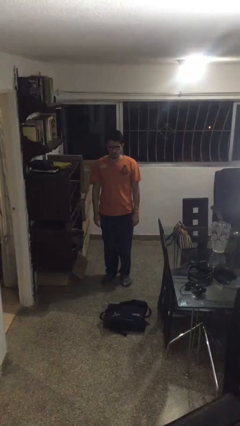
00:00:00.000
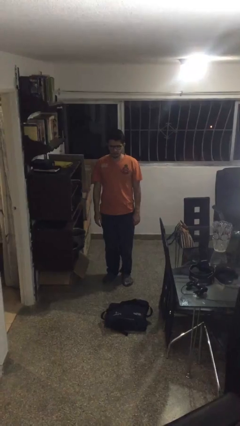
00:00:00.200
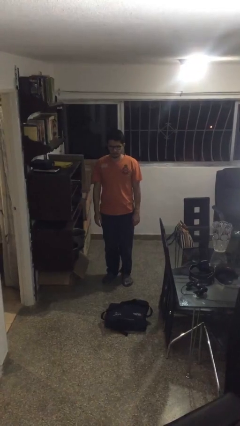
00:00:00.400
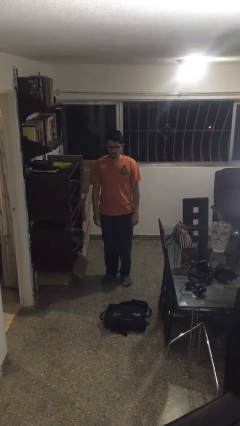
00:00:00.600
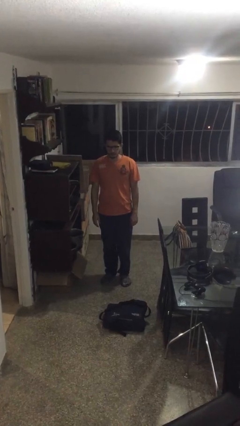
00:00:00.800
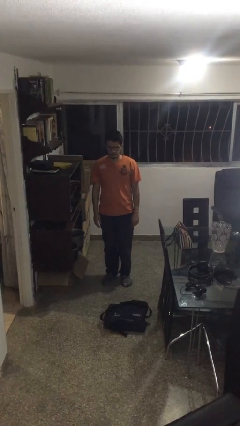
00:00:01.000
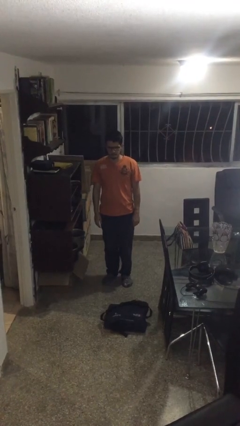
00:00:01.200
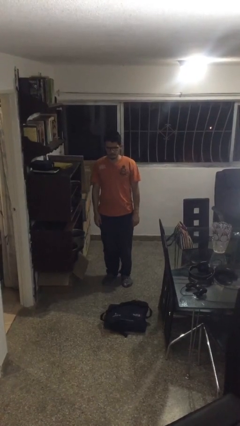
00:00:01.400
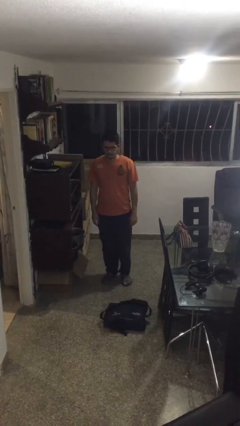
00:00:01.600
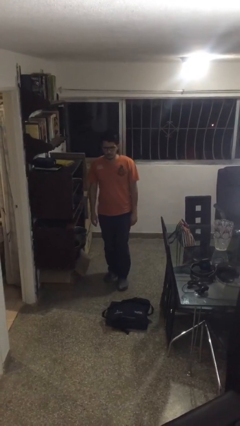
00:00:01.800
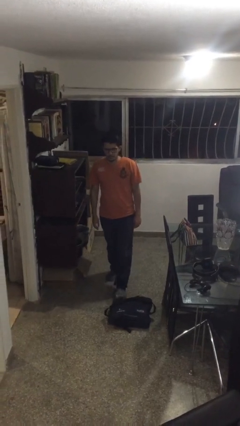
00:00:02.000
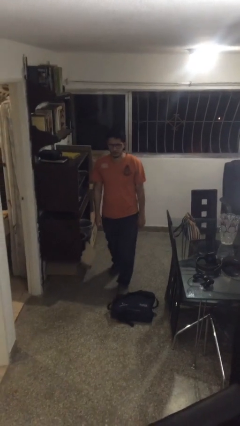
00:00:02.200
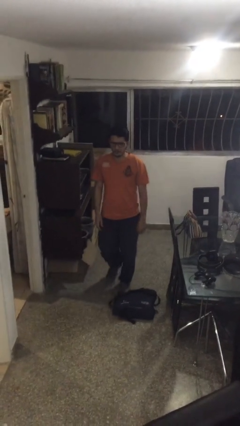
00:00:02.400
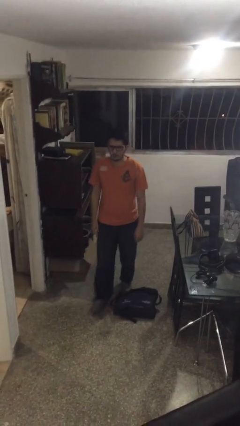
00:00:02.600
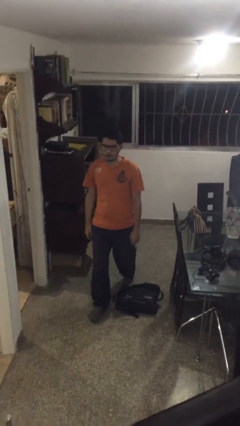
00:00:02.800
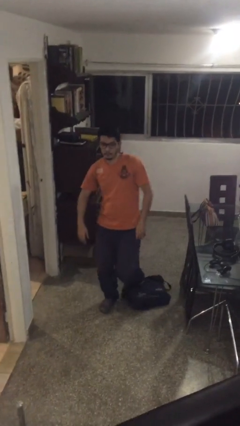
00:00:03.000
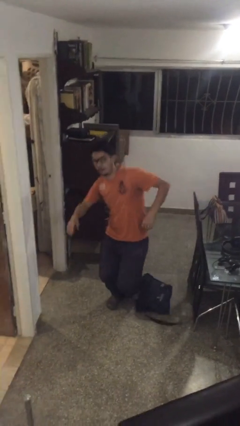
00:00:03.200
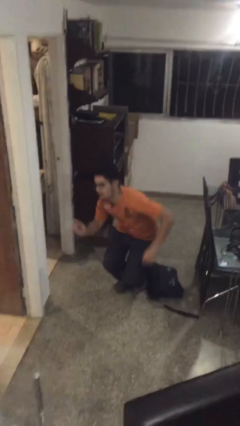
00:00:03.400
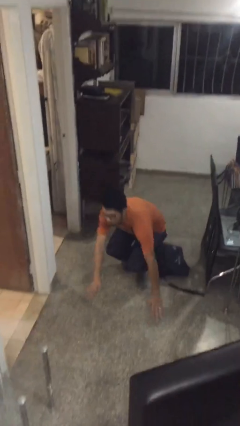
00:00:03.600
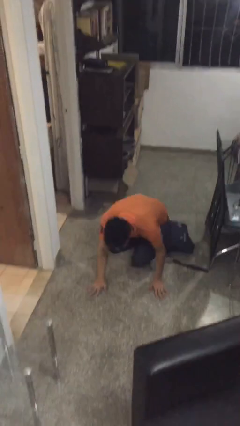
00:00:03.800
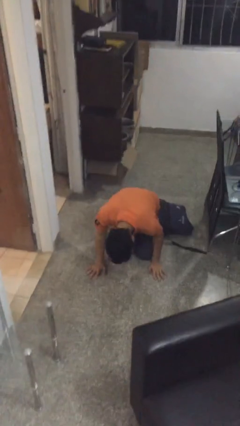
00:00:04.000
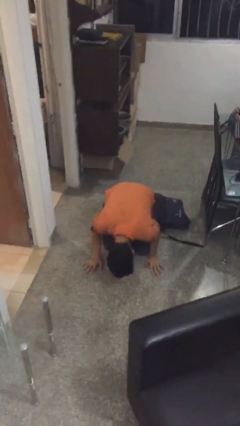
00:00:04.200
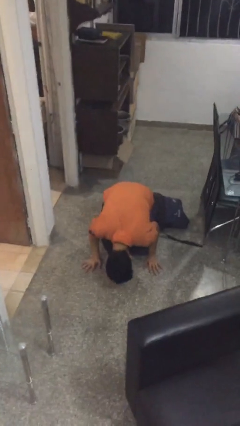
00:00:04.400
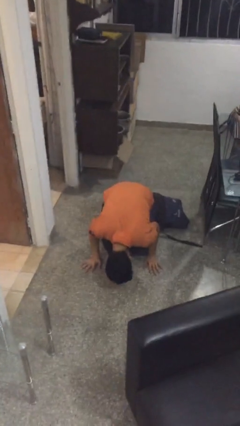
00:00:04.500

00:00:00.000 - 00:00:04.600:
person trips on object on floor

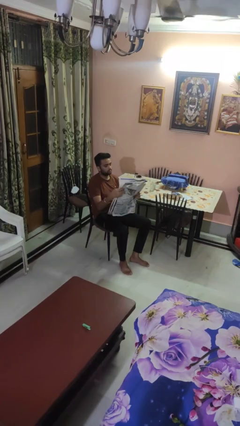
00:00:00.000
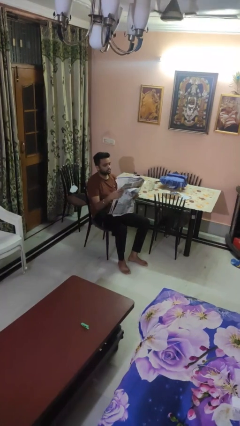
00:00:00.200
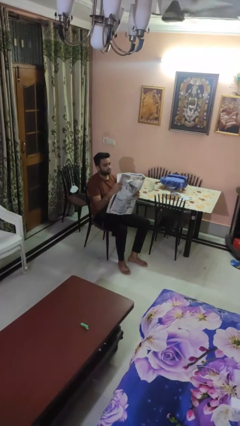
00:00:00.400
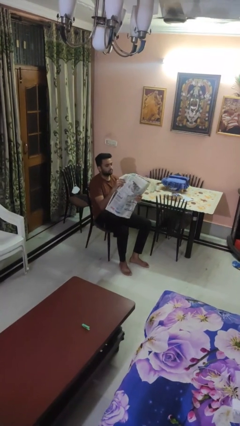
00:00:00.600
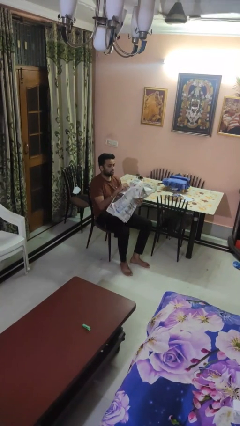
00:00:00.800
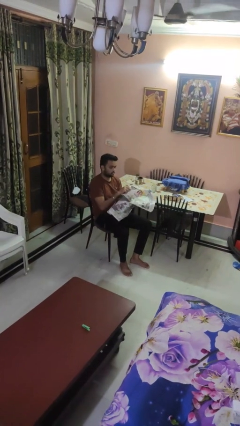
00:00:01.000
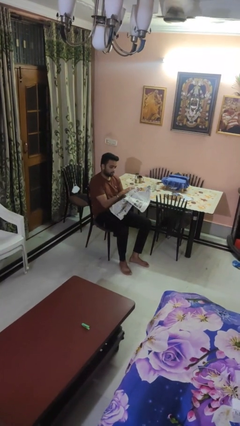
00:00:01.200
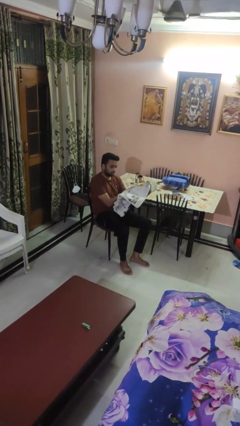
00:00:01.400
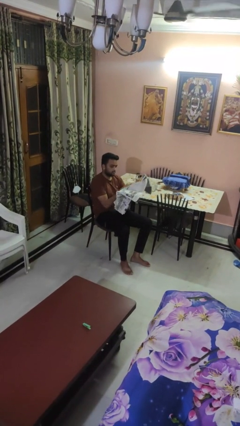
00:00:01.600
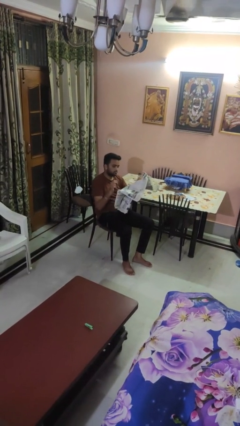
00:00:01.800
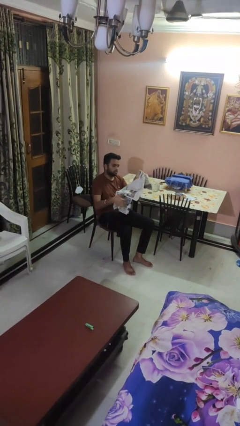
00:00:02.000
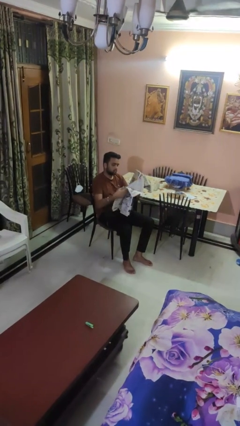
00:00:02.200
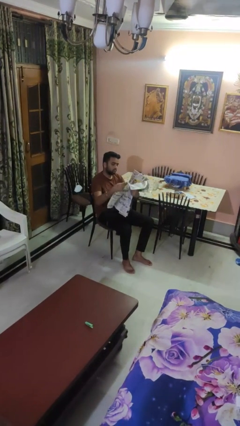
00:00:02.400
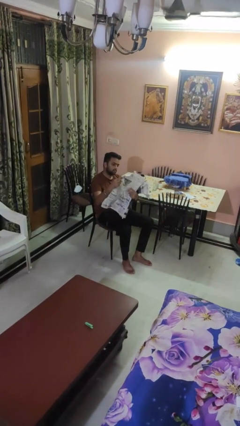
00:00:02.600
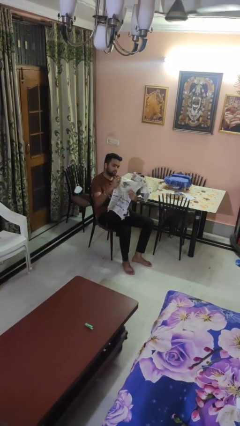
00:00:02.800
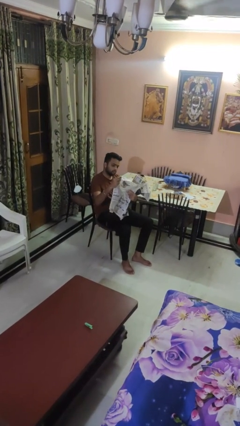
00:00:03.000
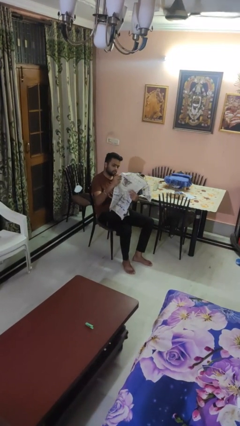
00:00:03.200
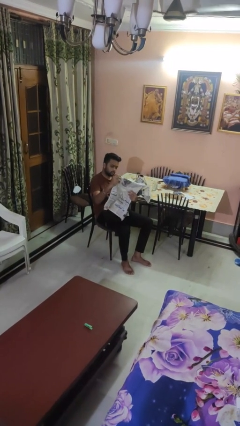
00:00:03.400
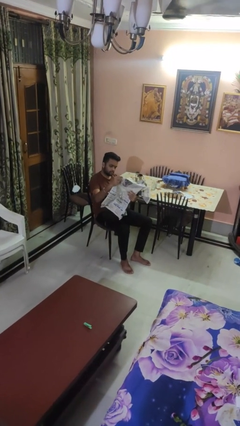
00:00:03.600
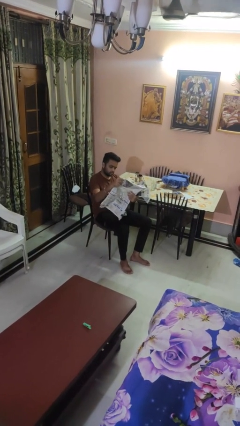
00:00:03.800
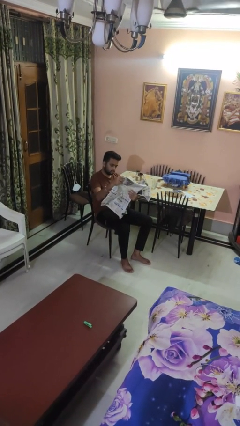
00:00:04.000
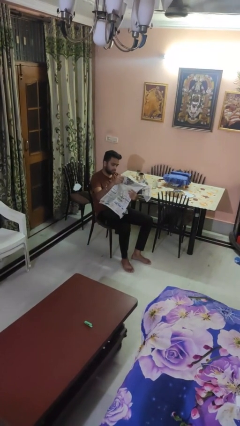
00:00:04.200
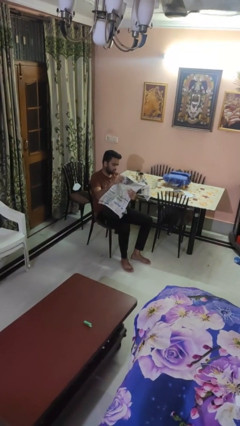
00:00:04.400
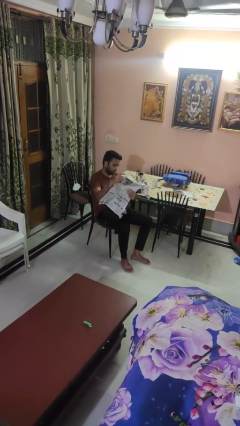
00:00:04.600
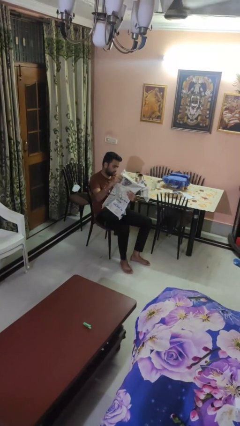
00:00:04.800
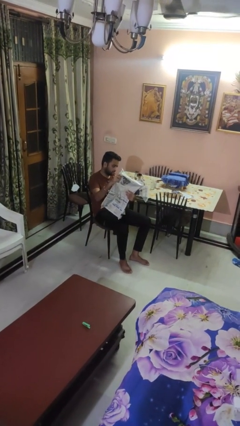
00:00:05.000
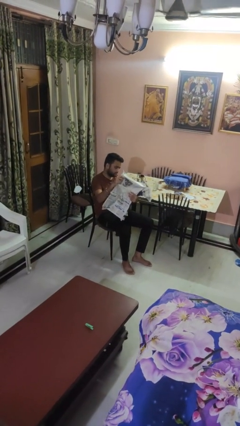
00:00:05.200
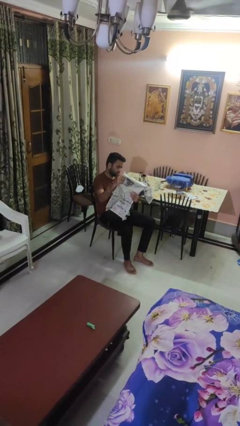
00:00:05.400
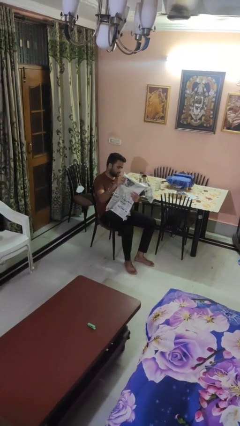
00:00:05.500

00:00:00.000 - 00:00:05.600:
person reads newspaper

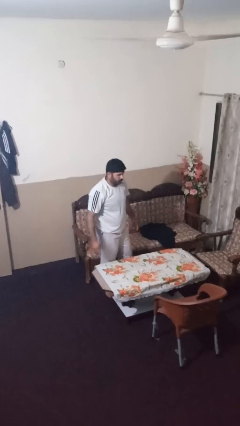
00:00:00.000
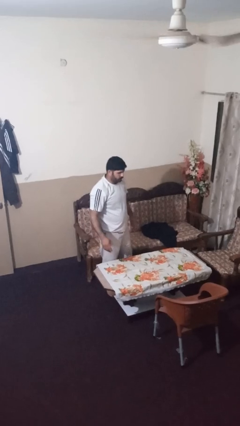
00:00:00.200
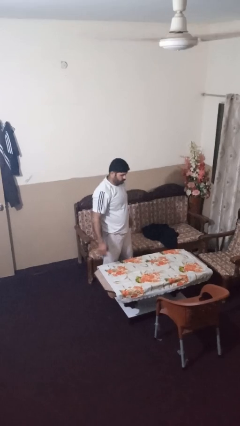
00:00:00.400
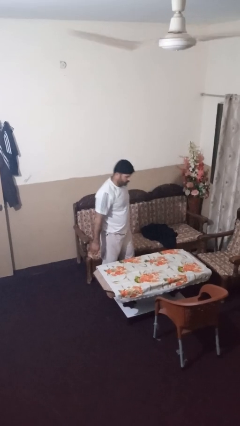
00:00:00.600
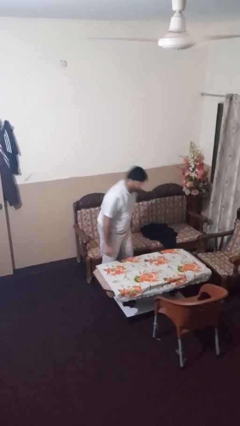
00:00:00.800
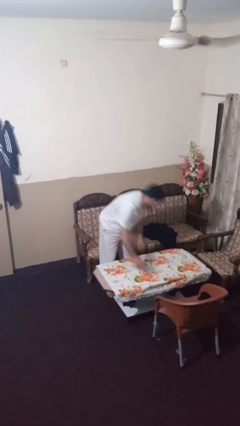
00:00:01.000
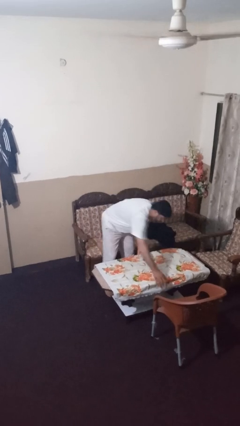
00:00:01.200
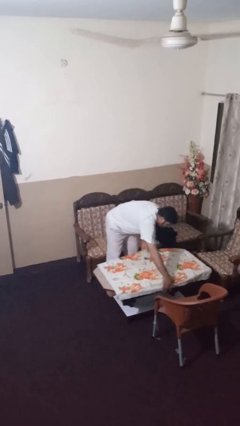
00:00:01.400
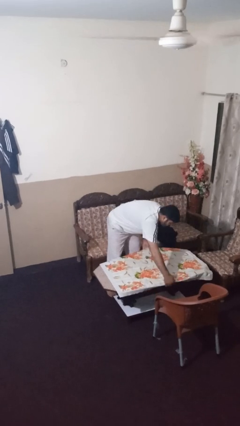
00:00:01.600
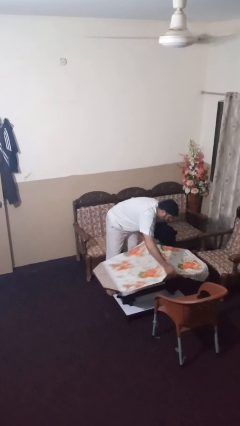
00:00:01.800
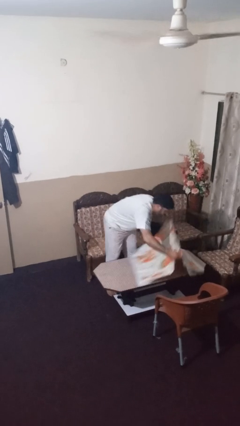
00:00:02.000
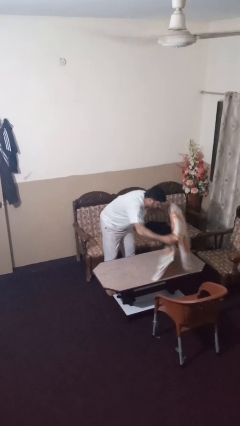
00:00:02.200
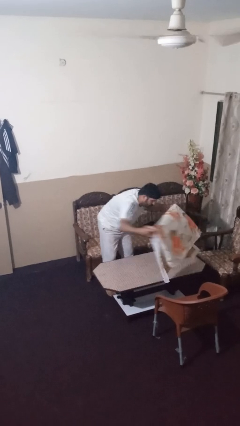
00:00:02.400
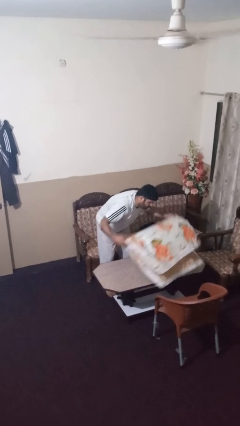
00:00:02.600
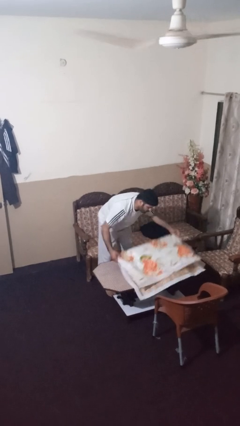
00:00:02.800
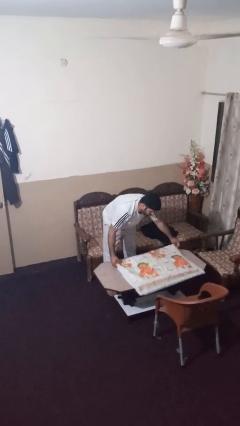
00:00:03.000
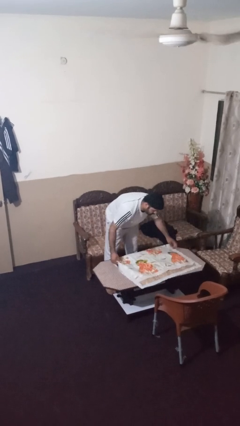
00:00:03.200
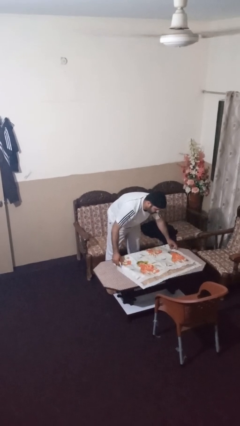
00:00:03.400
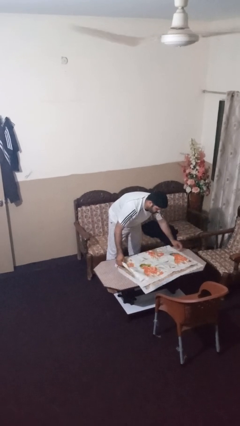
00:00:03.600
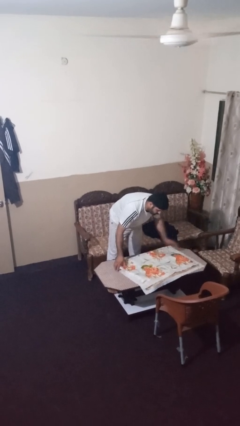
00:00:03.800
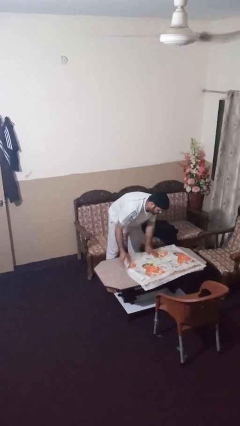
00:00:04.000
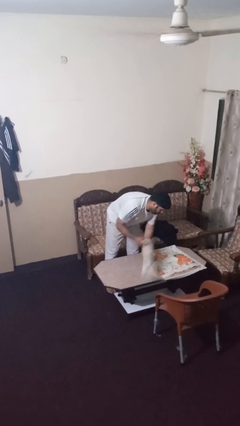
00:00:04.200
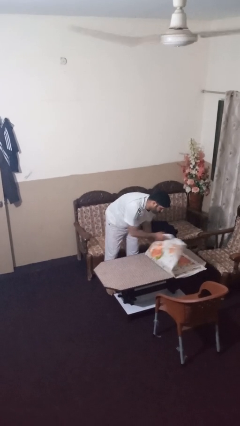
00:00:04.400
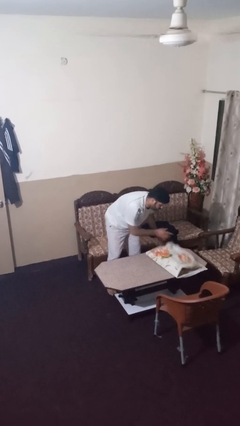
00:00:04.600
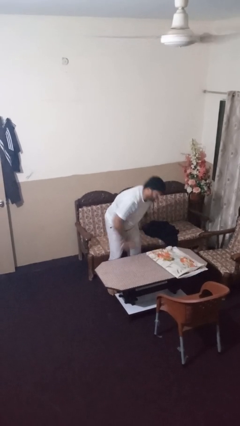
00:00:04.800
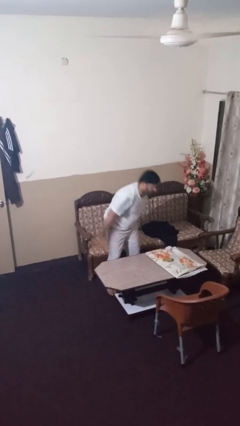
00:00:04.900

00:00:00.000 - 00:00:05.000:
person folds tablecloth

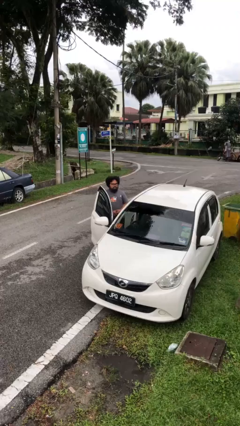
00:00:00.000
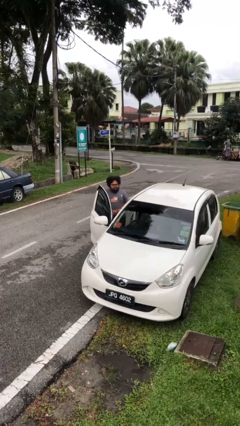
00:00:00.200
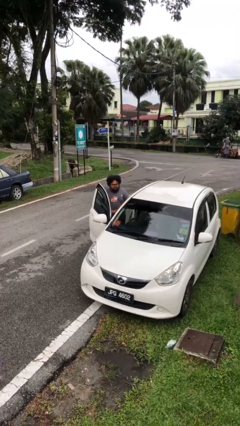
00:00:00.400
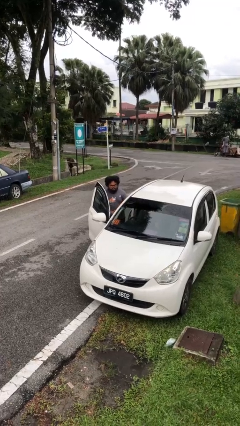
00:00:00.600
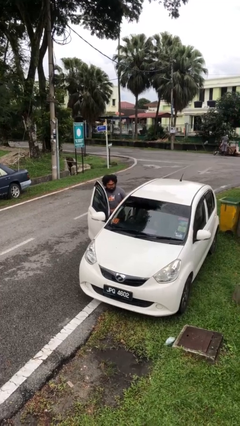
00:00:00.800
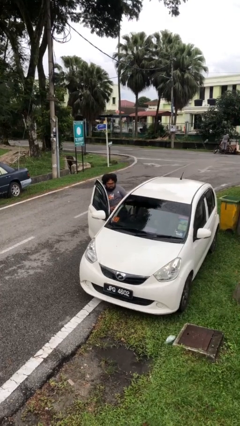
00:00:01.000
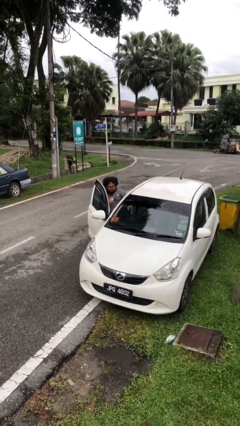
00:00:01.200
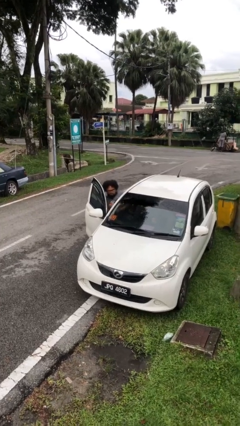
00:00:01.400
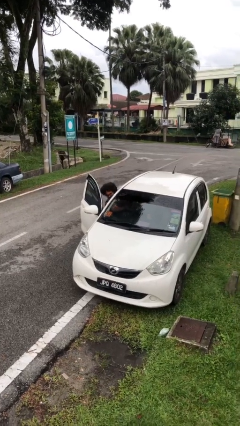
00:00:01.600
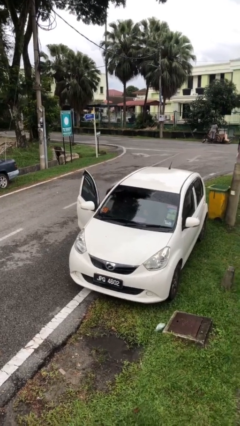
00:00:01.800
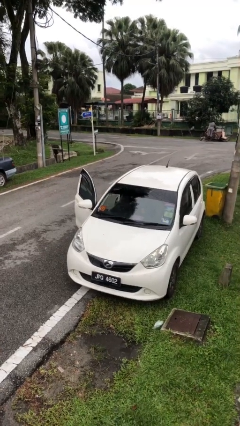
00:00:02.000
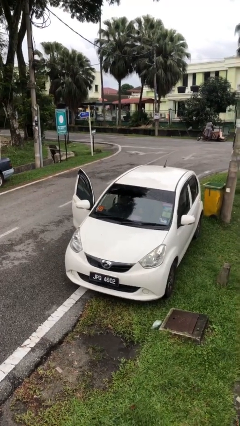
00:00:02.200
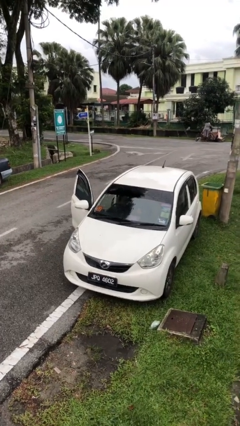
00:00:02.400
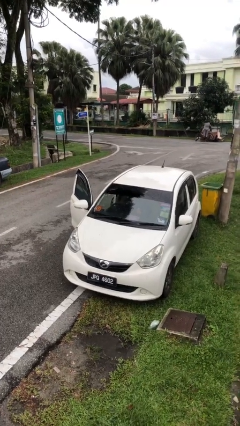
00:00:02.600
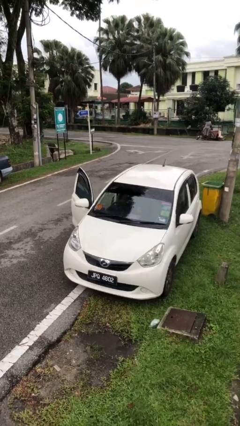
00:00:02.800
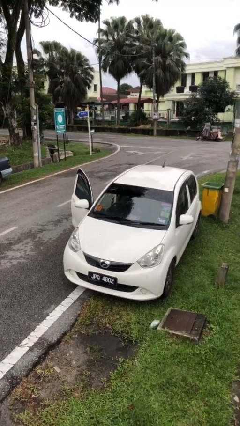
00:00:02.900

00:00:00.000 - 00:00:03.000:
person enters car
